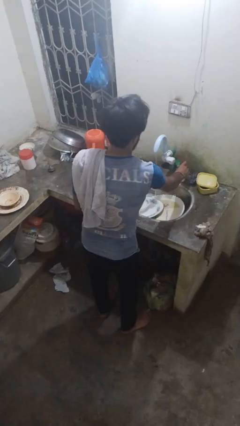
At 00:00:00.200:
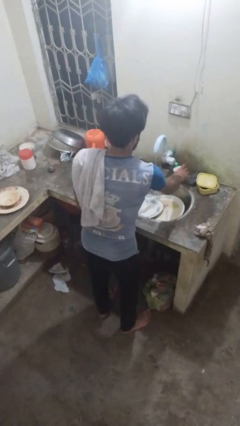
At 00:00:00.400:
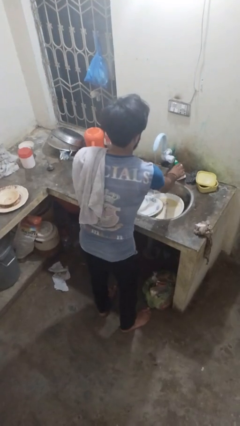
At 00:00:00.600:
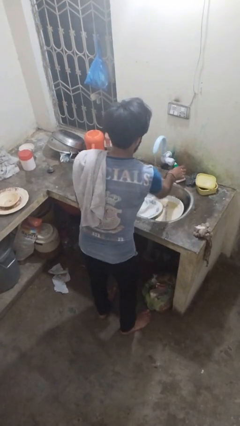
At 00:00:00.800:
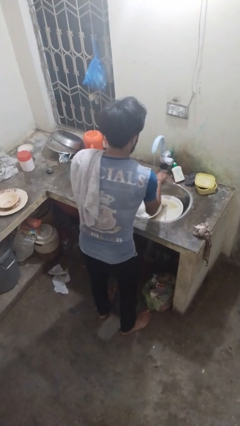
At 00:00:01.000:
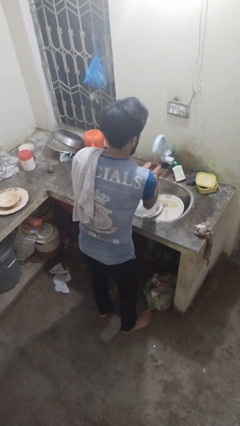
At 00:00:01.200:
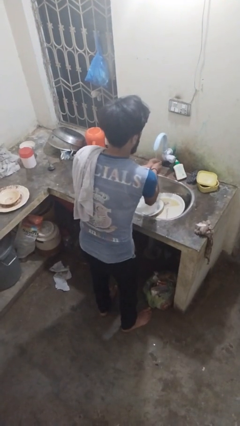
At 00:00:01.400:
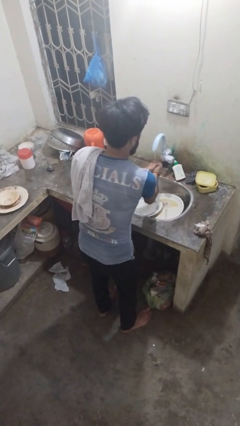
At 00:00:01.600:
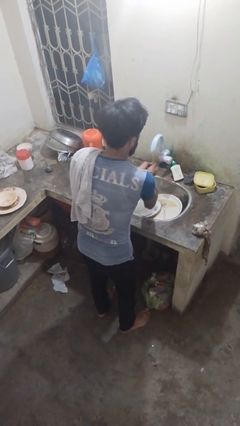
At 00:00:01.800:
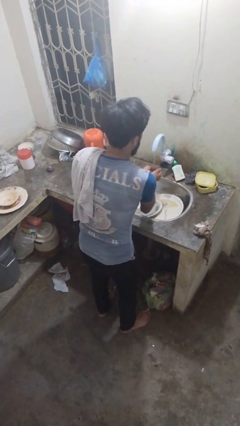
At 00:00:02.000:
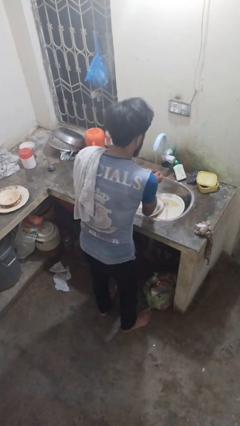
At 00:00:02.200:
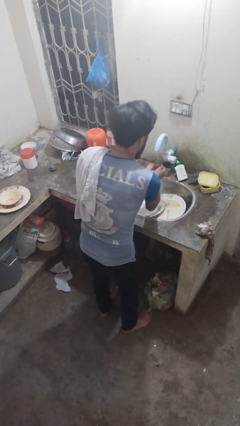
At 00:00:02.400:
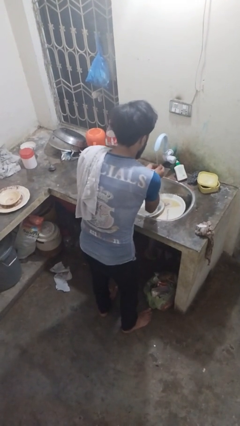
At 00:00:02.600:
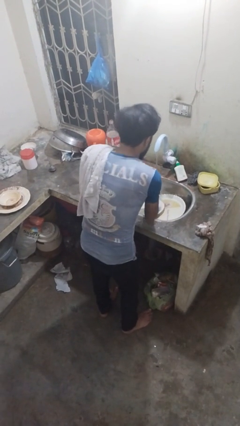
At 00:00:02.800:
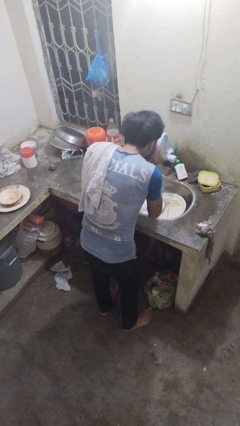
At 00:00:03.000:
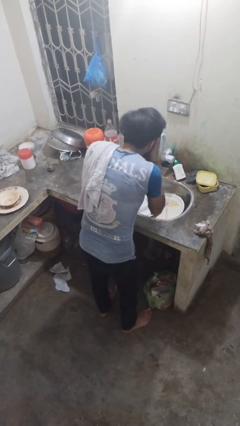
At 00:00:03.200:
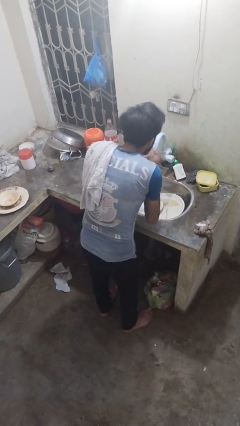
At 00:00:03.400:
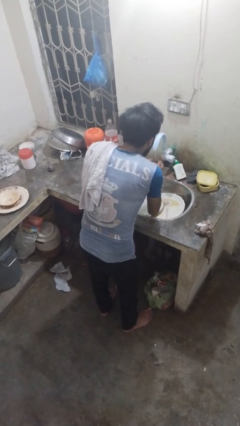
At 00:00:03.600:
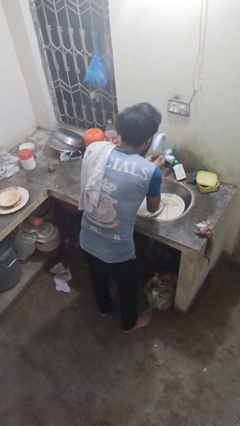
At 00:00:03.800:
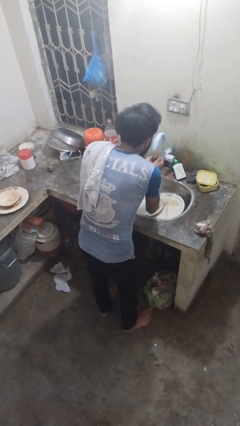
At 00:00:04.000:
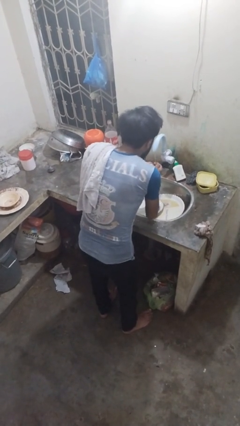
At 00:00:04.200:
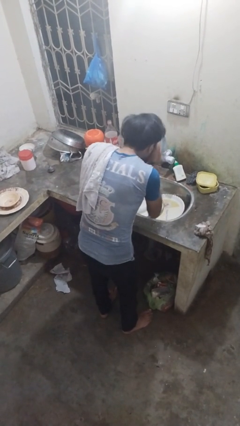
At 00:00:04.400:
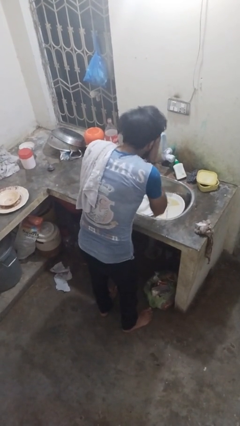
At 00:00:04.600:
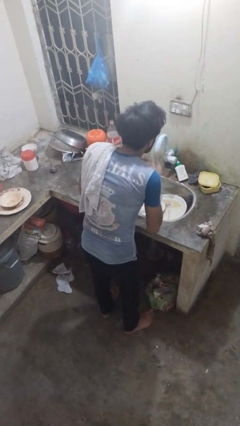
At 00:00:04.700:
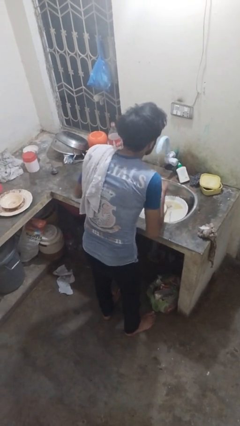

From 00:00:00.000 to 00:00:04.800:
person washes face

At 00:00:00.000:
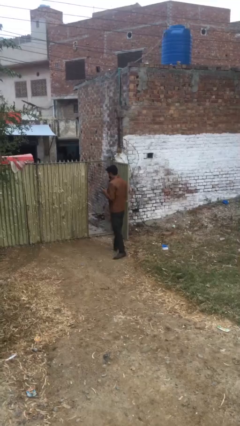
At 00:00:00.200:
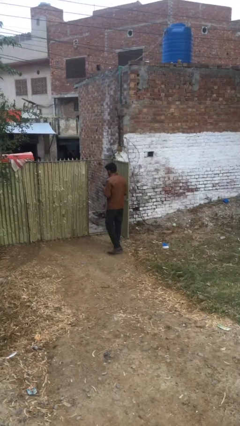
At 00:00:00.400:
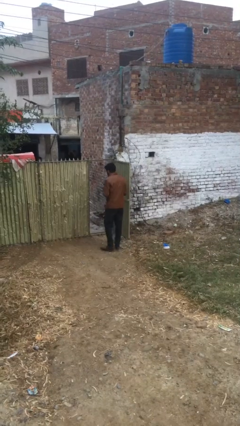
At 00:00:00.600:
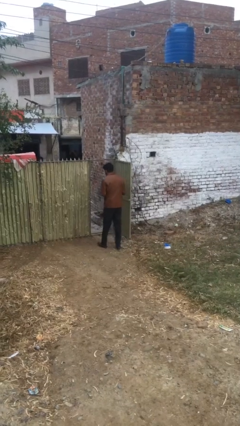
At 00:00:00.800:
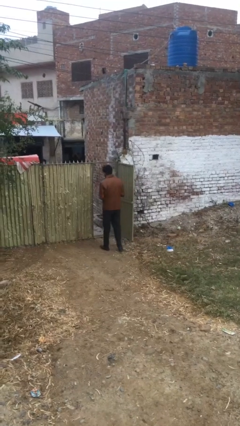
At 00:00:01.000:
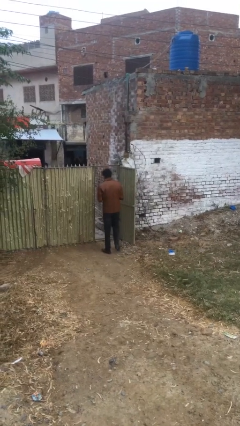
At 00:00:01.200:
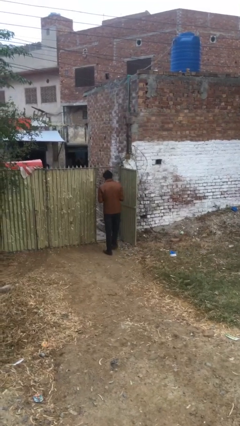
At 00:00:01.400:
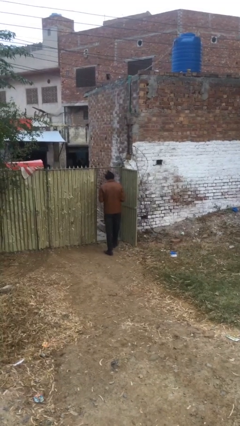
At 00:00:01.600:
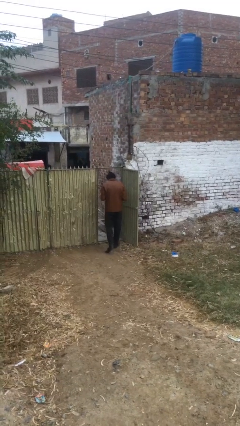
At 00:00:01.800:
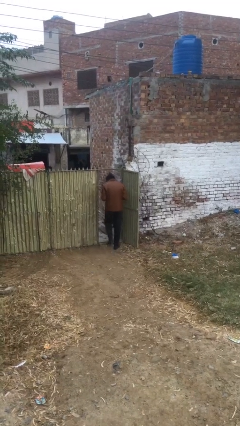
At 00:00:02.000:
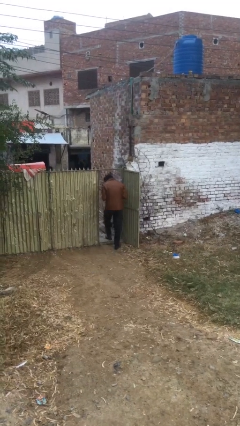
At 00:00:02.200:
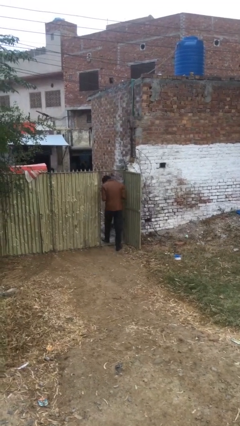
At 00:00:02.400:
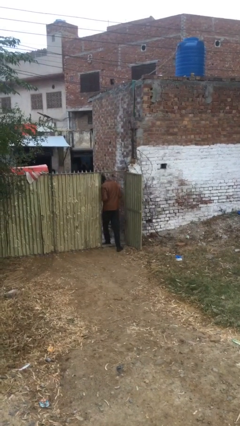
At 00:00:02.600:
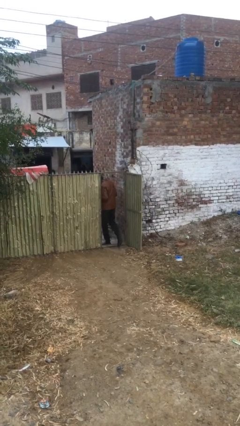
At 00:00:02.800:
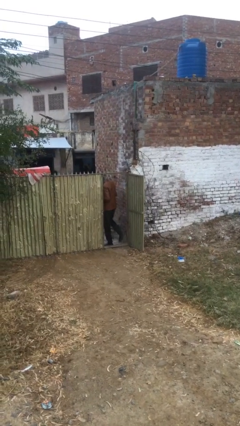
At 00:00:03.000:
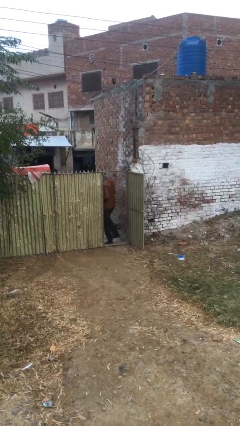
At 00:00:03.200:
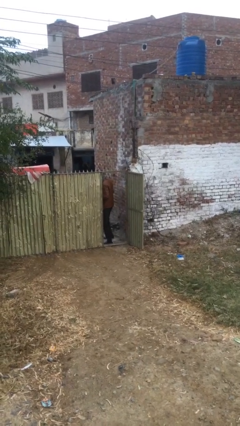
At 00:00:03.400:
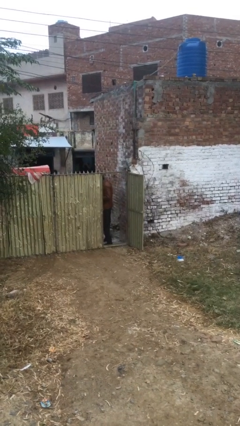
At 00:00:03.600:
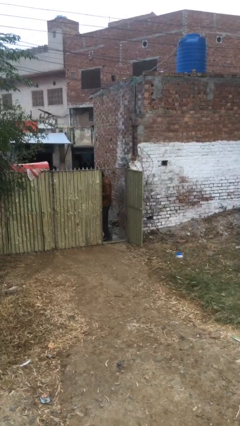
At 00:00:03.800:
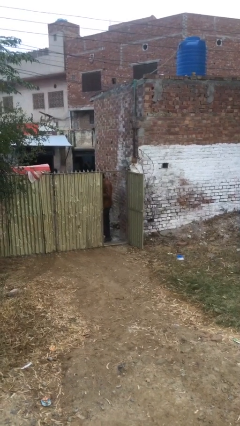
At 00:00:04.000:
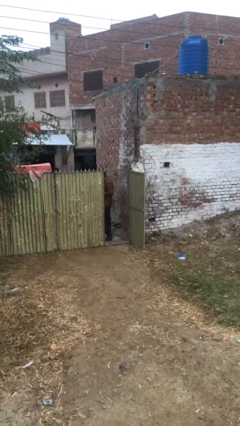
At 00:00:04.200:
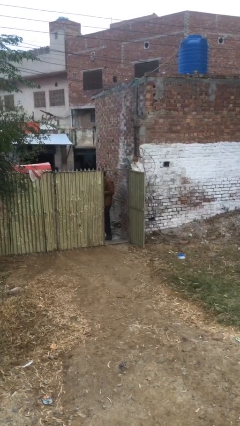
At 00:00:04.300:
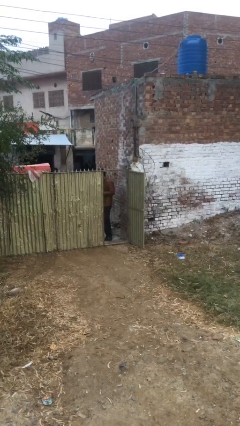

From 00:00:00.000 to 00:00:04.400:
person enters scene through structure

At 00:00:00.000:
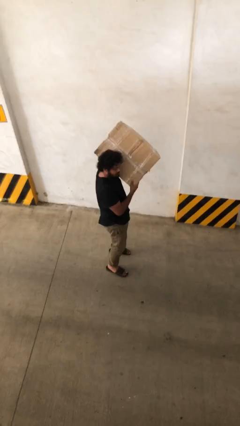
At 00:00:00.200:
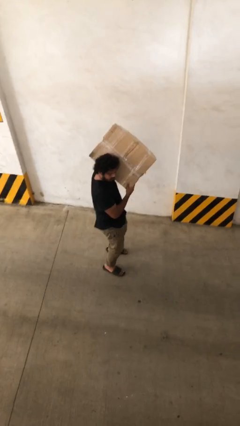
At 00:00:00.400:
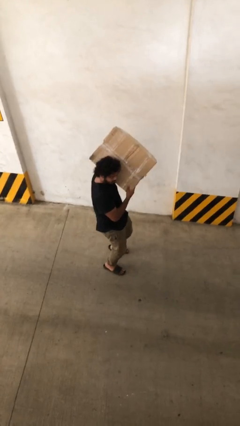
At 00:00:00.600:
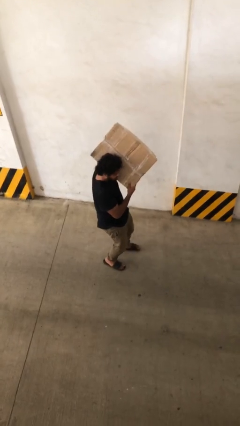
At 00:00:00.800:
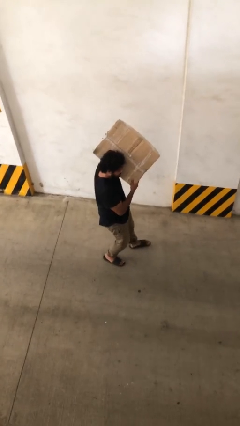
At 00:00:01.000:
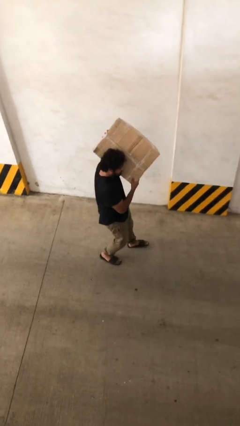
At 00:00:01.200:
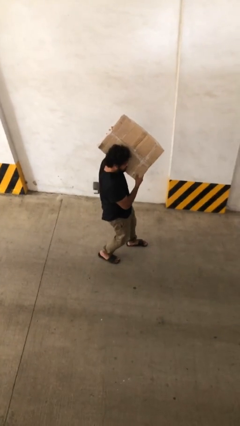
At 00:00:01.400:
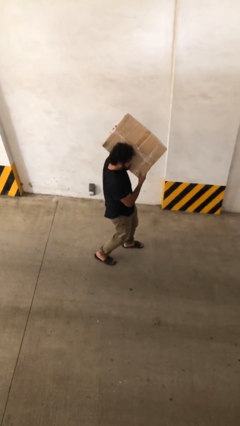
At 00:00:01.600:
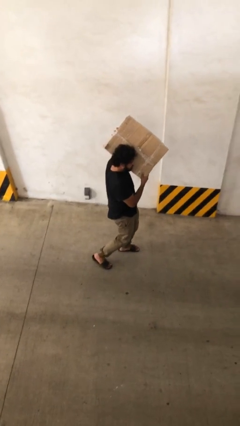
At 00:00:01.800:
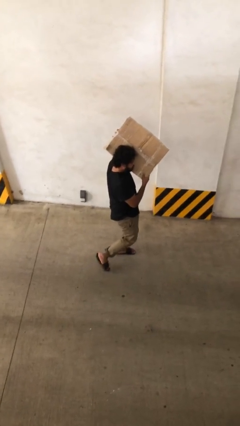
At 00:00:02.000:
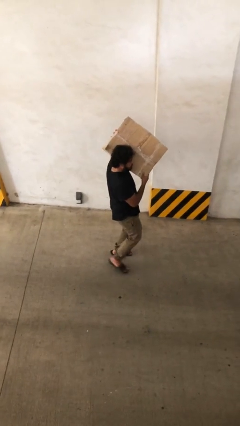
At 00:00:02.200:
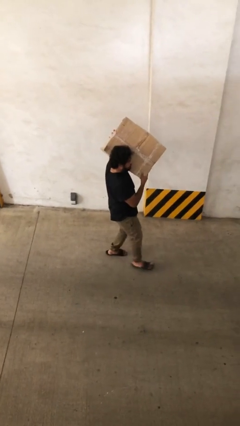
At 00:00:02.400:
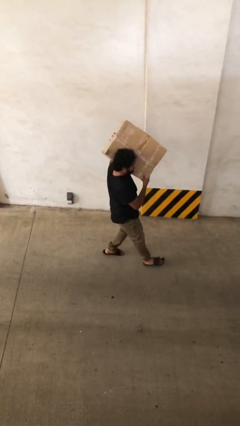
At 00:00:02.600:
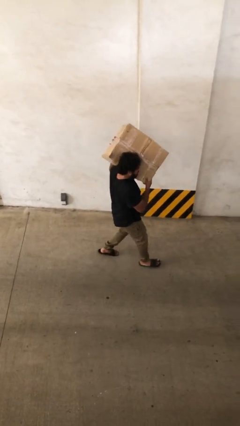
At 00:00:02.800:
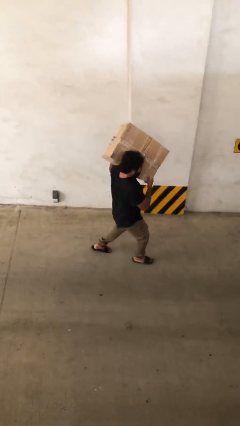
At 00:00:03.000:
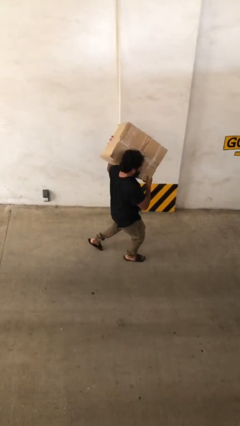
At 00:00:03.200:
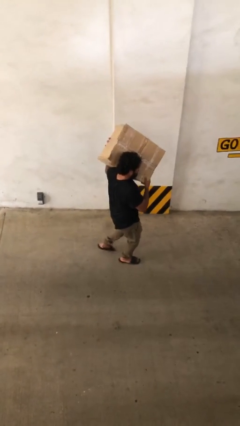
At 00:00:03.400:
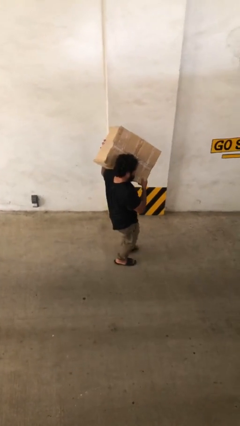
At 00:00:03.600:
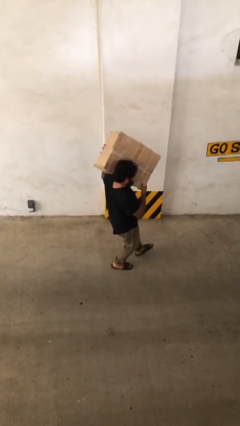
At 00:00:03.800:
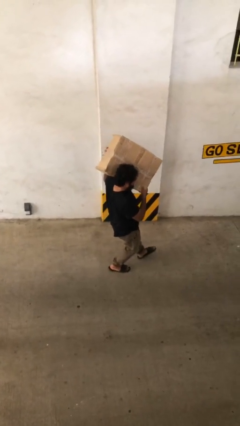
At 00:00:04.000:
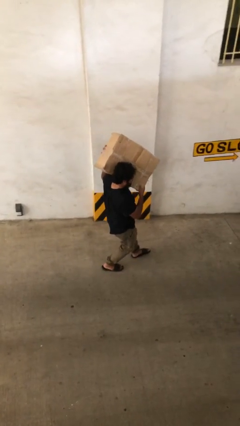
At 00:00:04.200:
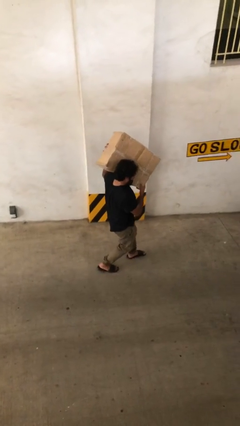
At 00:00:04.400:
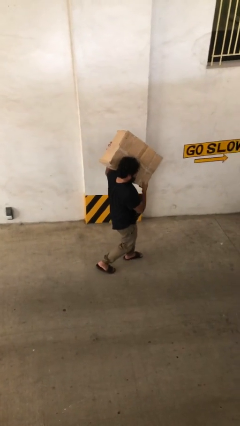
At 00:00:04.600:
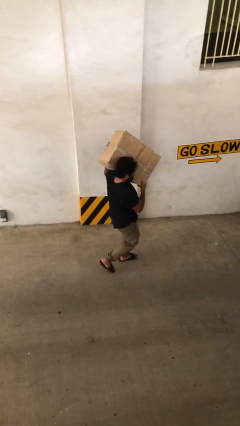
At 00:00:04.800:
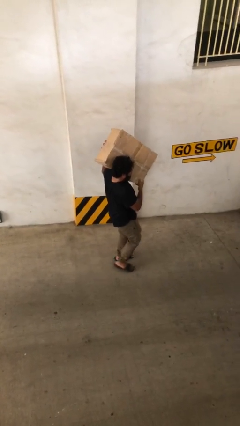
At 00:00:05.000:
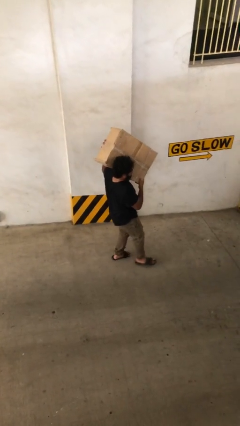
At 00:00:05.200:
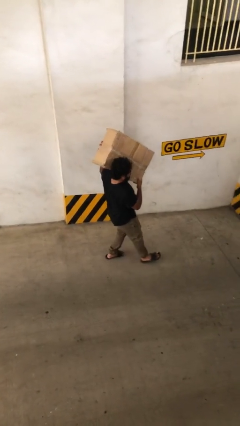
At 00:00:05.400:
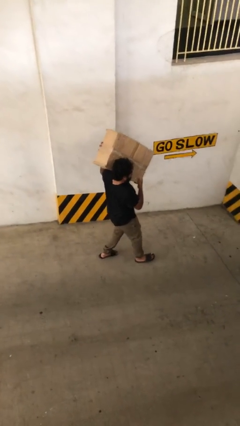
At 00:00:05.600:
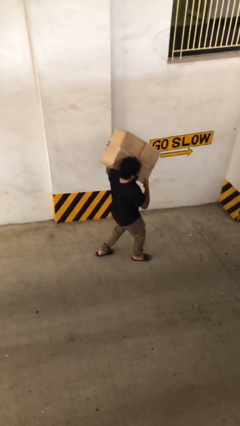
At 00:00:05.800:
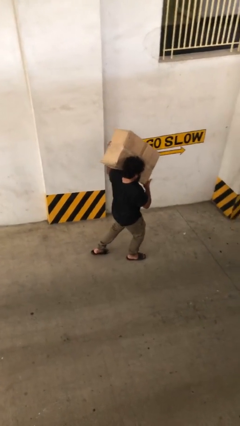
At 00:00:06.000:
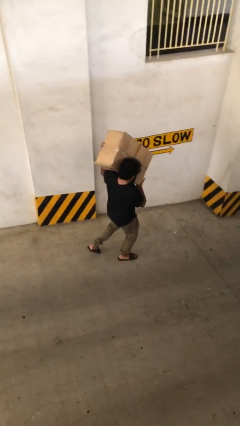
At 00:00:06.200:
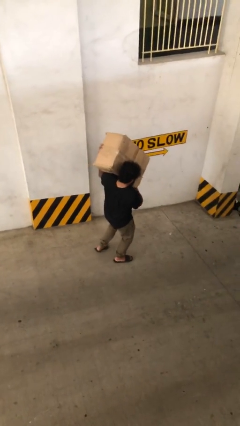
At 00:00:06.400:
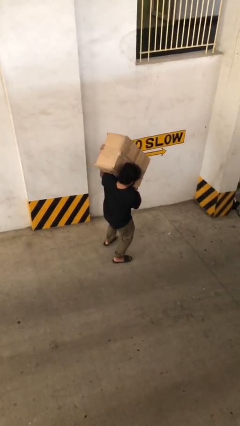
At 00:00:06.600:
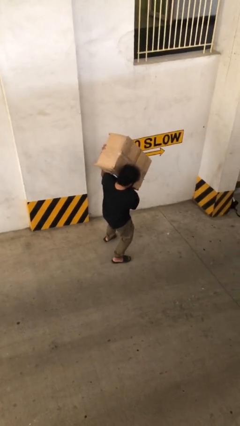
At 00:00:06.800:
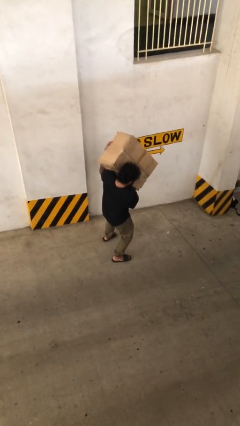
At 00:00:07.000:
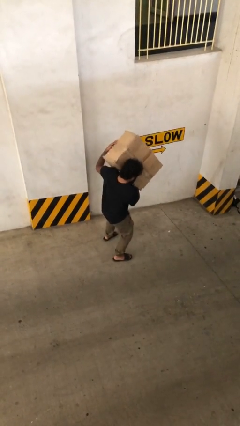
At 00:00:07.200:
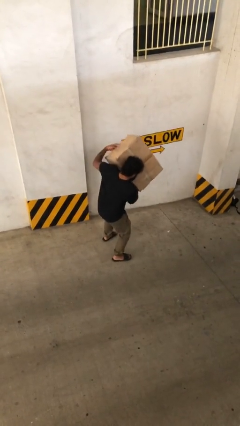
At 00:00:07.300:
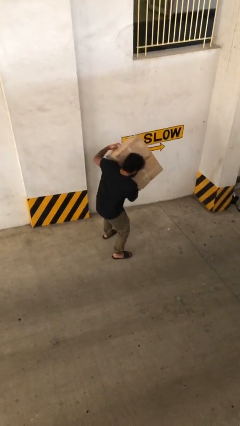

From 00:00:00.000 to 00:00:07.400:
person carries heavy object

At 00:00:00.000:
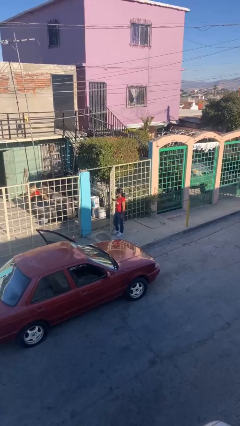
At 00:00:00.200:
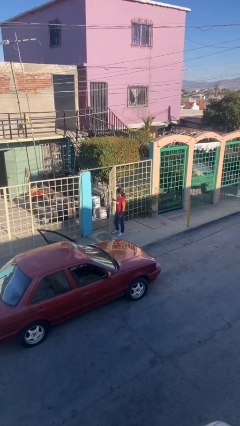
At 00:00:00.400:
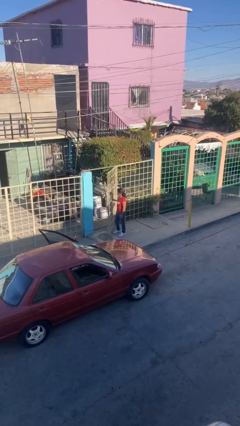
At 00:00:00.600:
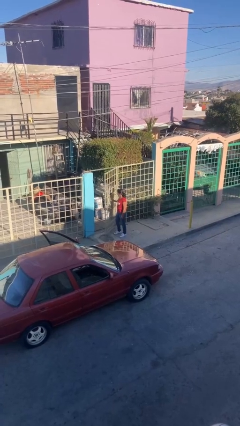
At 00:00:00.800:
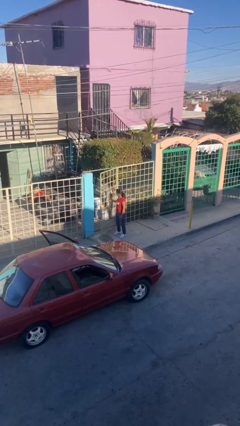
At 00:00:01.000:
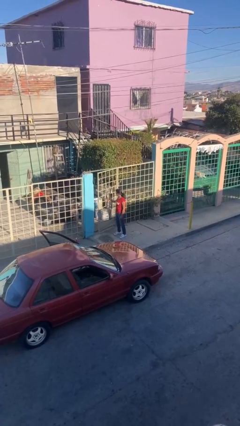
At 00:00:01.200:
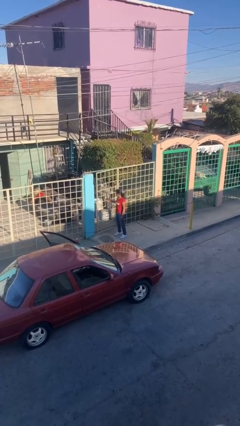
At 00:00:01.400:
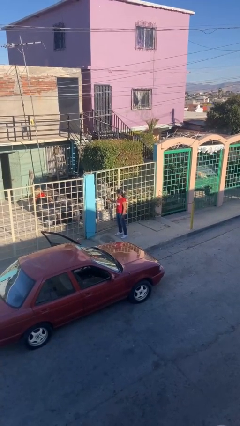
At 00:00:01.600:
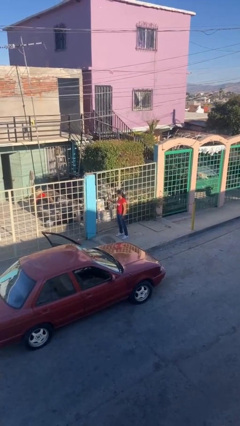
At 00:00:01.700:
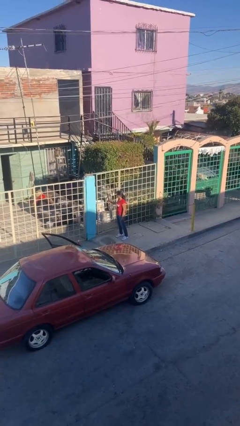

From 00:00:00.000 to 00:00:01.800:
person closes facility door
